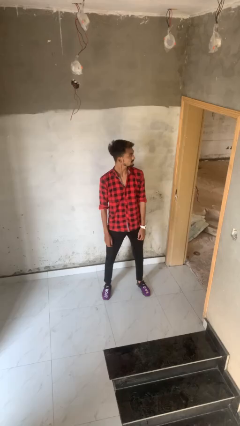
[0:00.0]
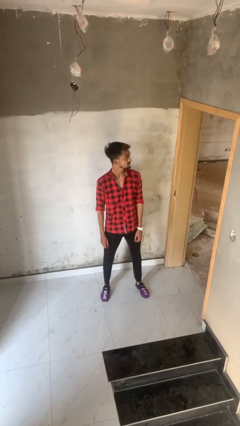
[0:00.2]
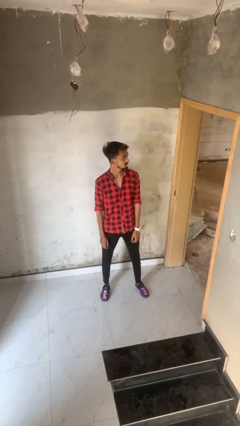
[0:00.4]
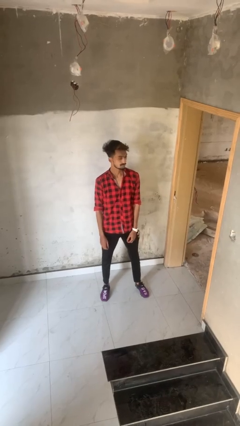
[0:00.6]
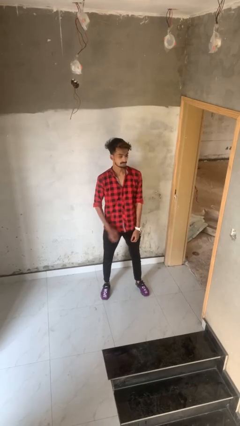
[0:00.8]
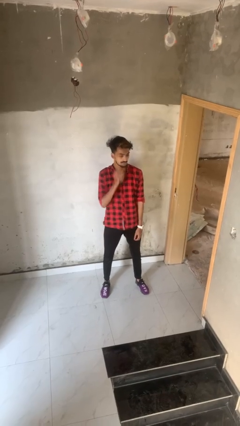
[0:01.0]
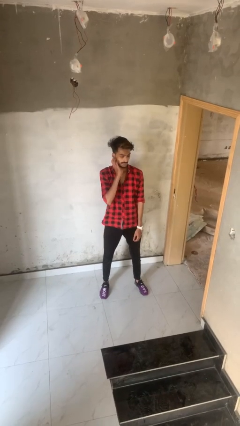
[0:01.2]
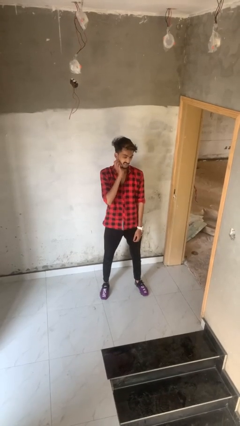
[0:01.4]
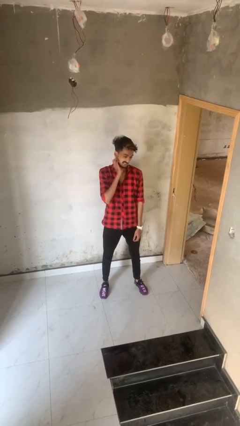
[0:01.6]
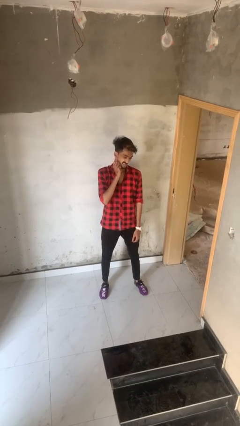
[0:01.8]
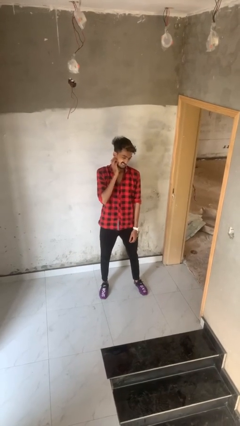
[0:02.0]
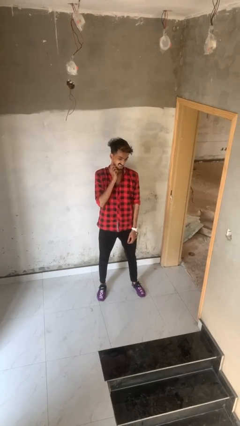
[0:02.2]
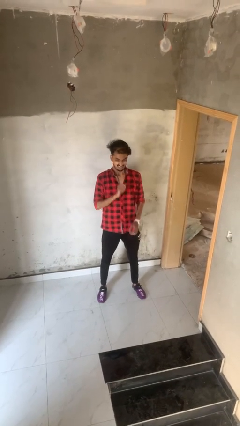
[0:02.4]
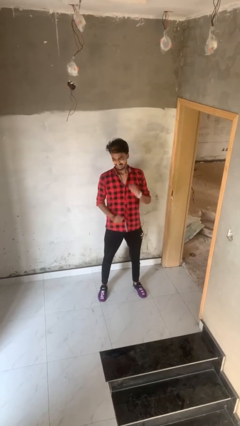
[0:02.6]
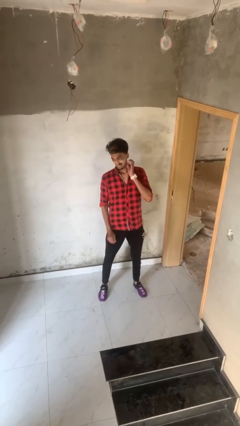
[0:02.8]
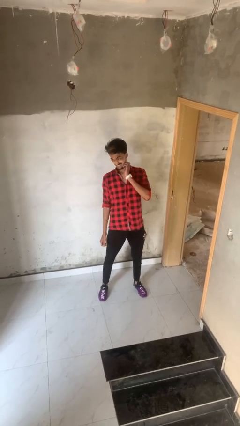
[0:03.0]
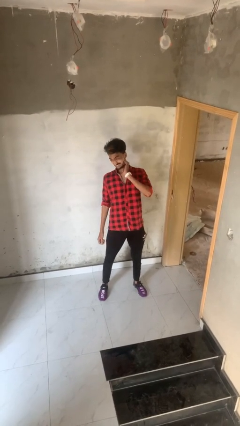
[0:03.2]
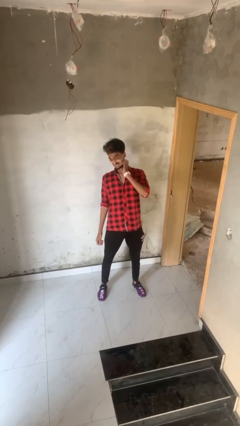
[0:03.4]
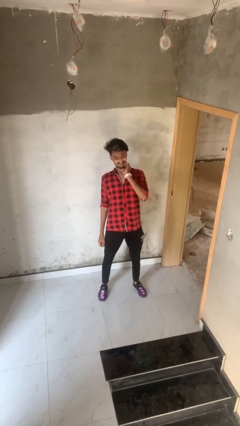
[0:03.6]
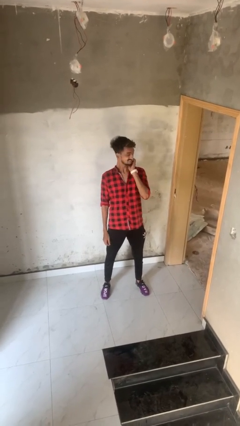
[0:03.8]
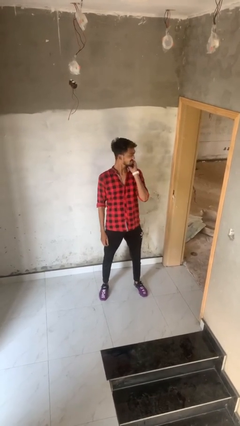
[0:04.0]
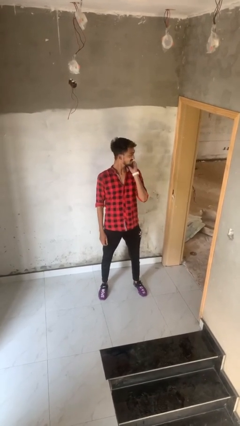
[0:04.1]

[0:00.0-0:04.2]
person scratches face

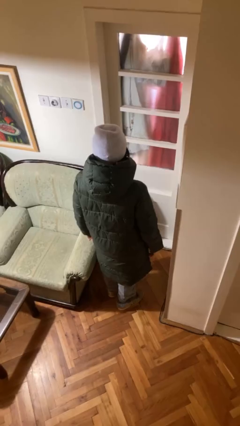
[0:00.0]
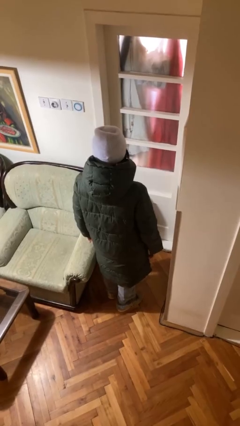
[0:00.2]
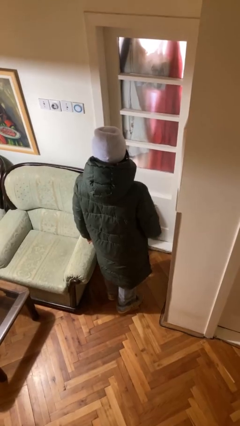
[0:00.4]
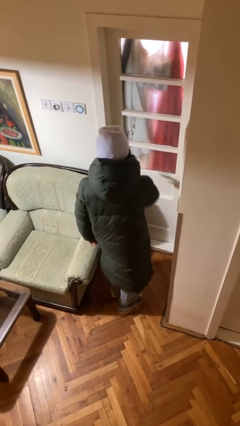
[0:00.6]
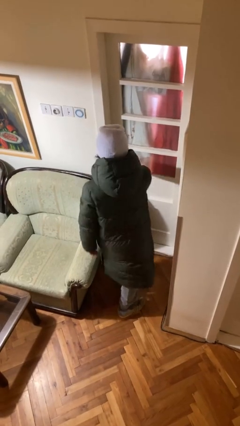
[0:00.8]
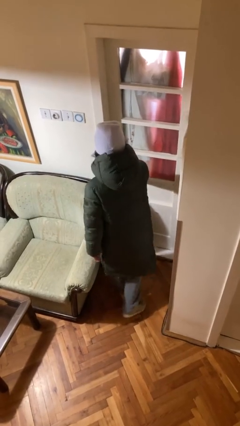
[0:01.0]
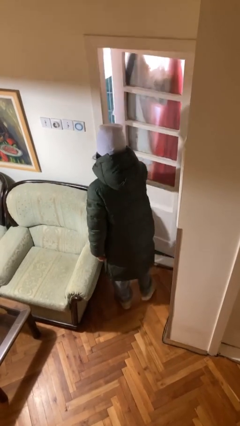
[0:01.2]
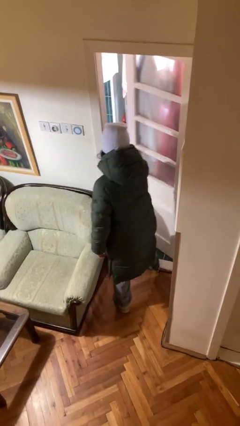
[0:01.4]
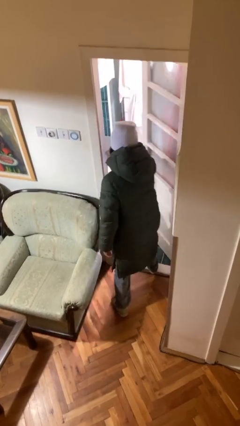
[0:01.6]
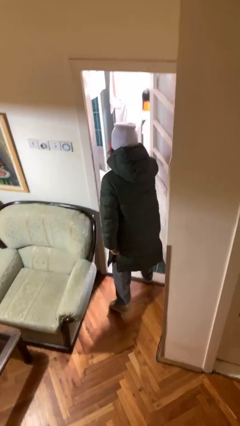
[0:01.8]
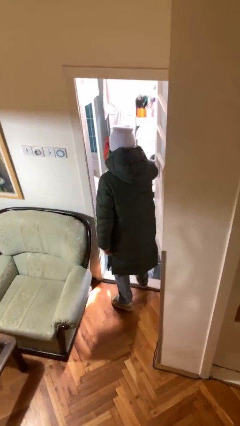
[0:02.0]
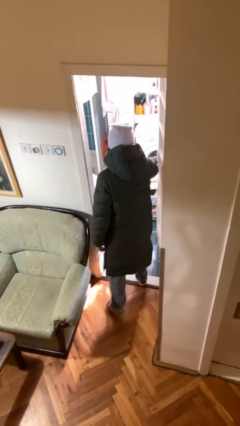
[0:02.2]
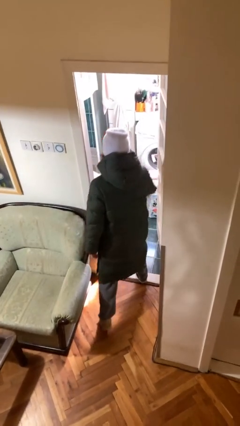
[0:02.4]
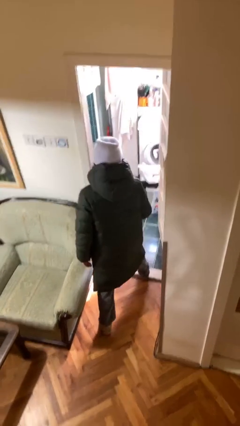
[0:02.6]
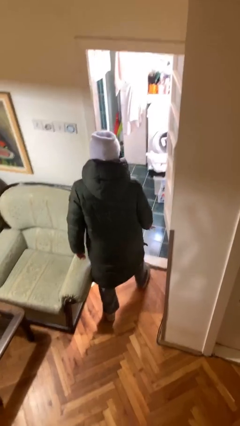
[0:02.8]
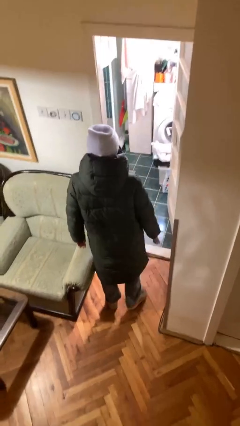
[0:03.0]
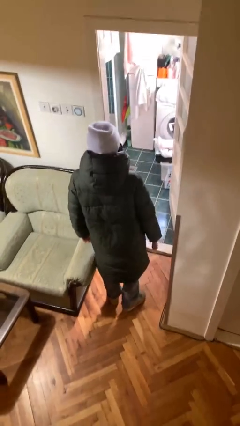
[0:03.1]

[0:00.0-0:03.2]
person opens facility door

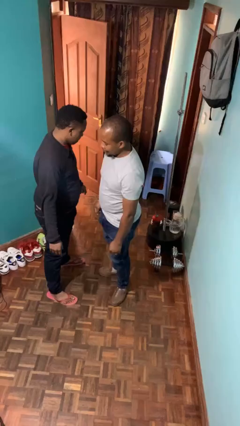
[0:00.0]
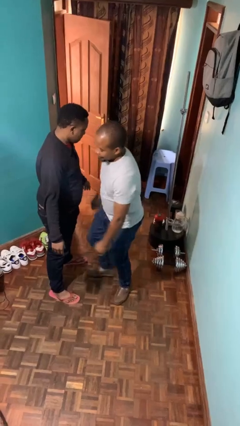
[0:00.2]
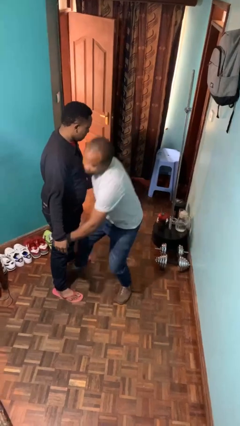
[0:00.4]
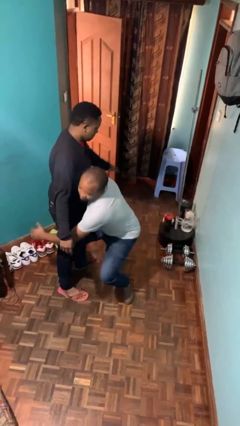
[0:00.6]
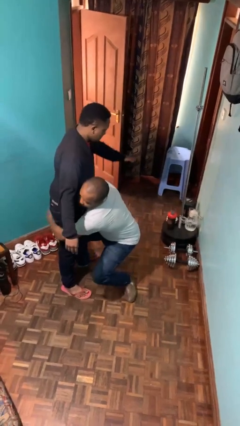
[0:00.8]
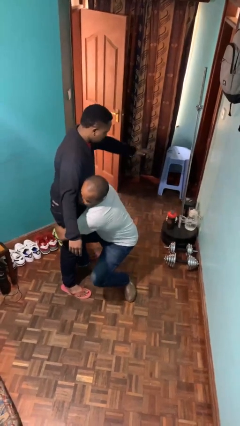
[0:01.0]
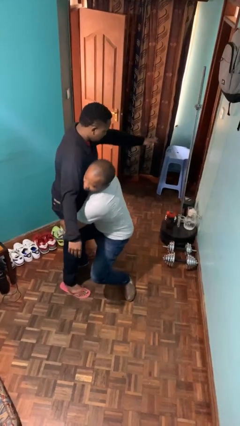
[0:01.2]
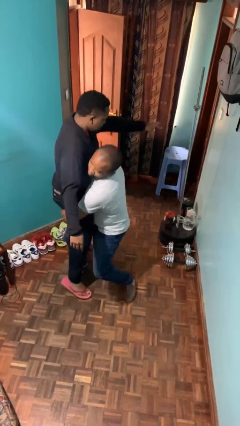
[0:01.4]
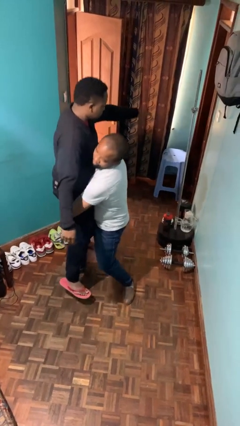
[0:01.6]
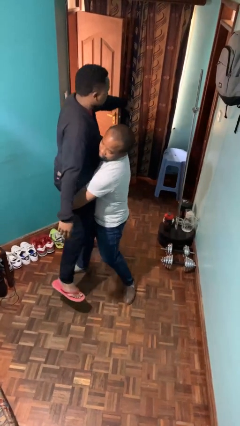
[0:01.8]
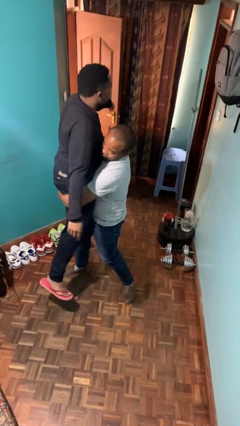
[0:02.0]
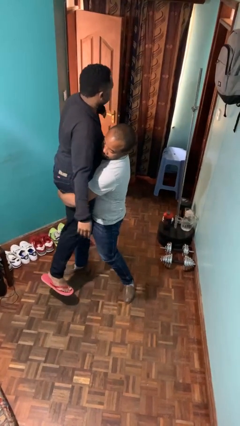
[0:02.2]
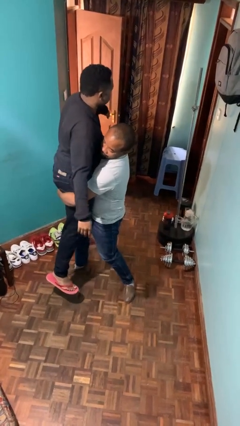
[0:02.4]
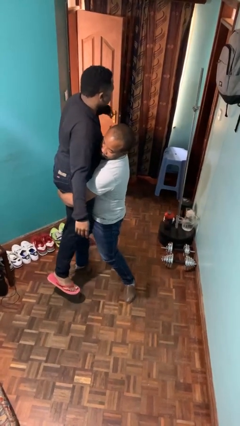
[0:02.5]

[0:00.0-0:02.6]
person picks up person

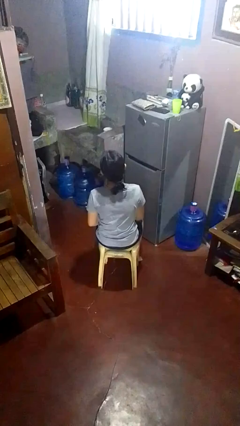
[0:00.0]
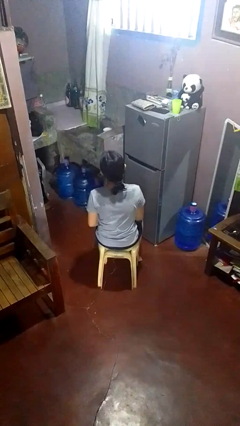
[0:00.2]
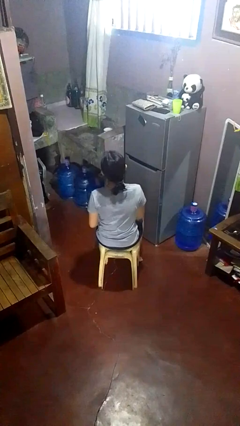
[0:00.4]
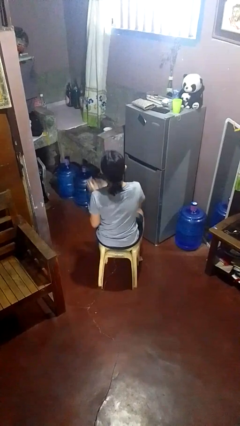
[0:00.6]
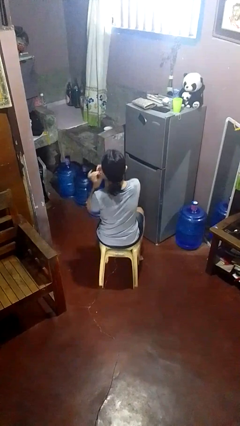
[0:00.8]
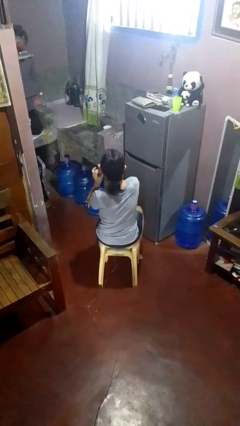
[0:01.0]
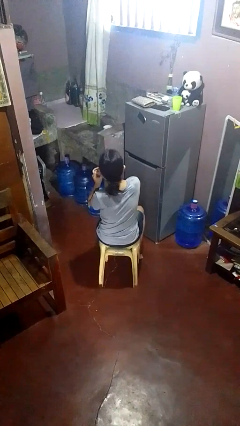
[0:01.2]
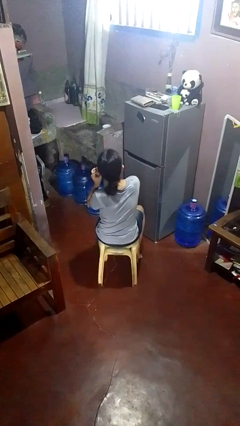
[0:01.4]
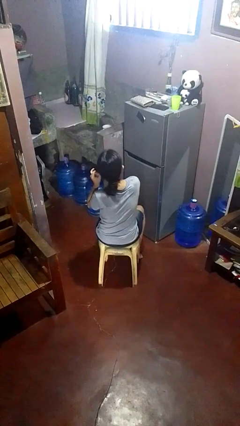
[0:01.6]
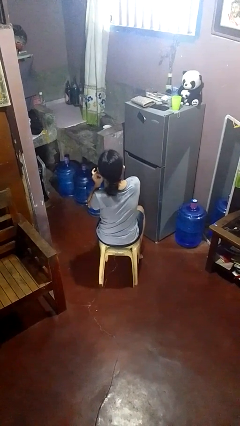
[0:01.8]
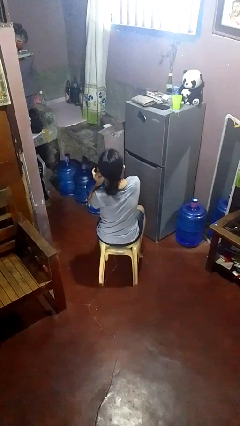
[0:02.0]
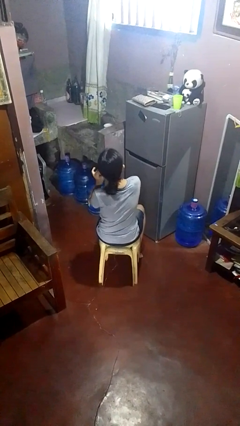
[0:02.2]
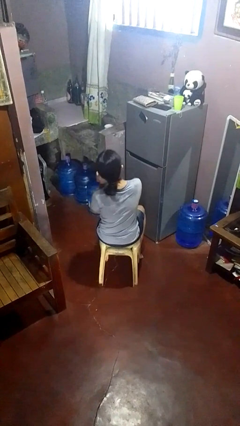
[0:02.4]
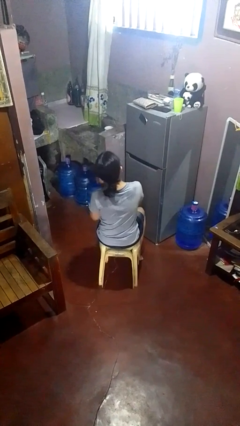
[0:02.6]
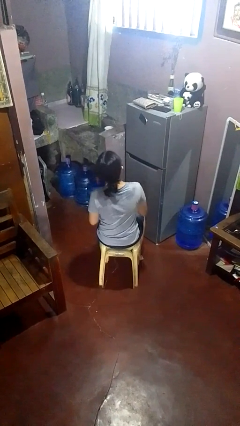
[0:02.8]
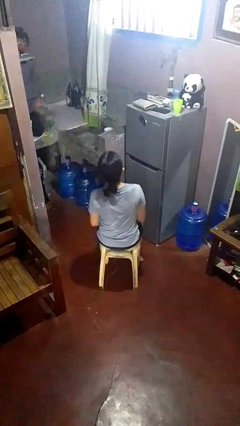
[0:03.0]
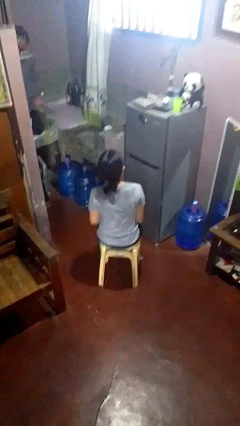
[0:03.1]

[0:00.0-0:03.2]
person takes off earrings

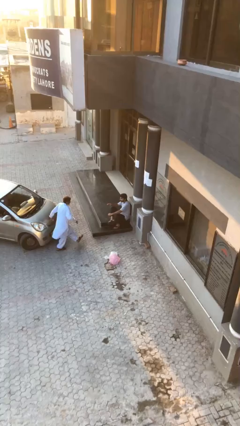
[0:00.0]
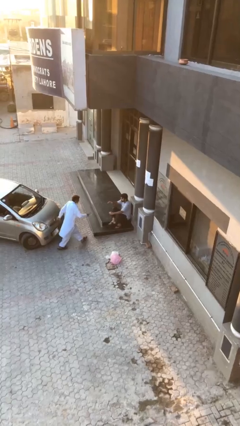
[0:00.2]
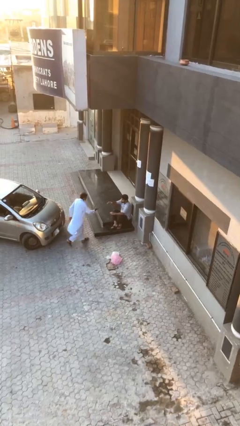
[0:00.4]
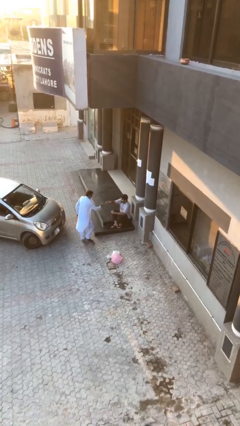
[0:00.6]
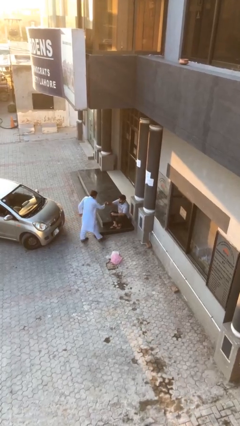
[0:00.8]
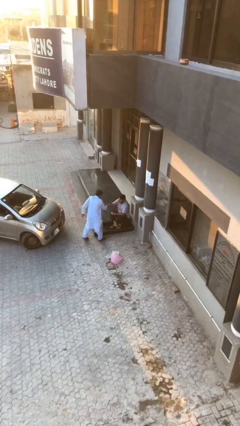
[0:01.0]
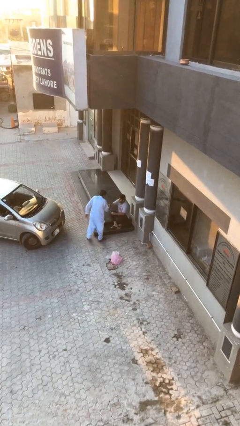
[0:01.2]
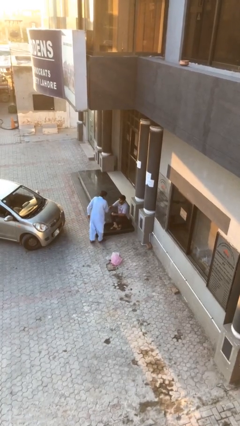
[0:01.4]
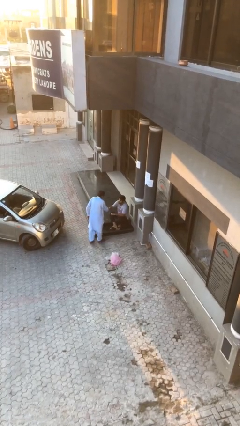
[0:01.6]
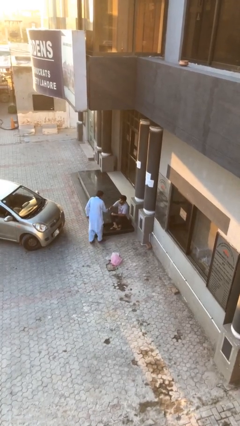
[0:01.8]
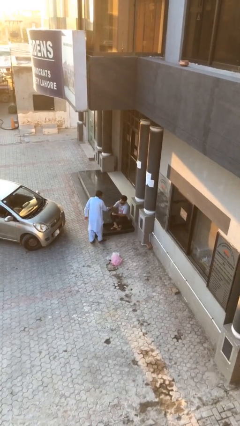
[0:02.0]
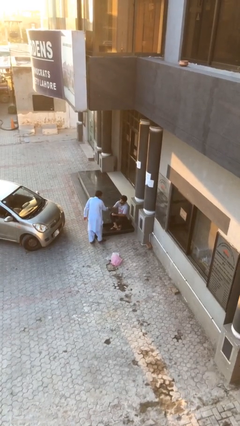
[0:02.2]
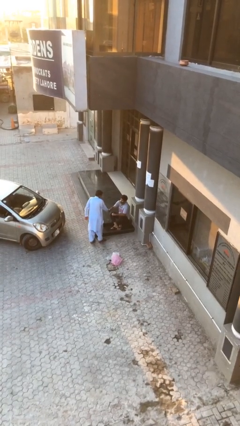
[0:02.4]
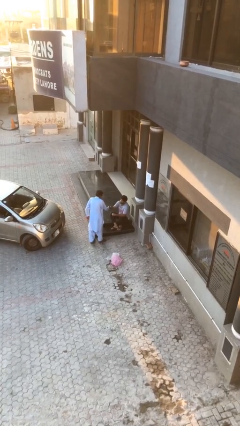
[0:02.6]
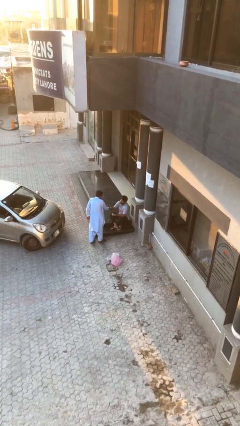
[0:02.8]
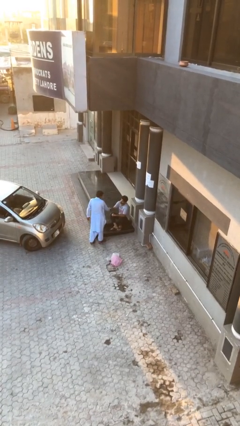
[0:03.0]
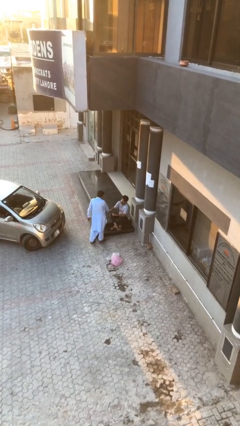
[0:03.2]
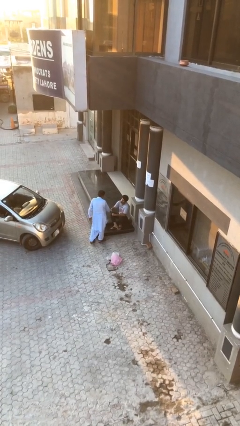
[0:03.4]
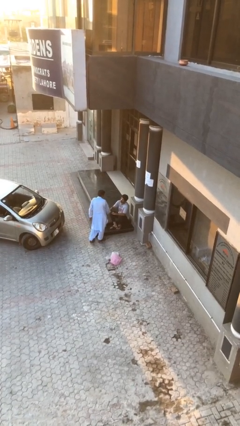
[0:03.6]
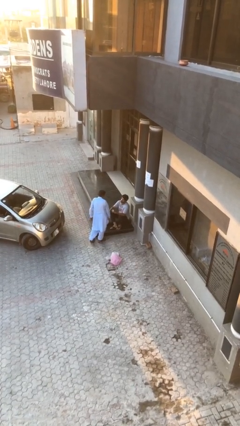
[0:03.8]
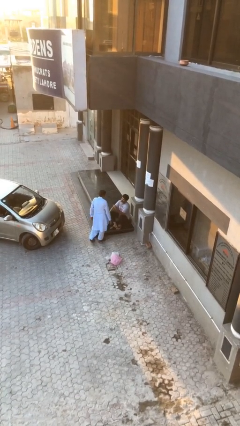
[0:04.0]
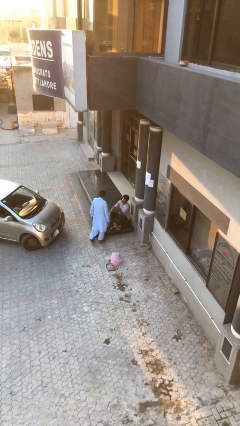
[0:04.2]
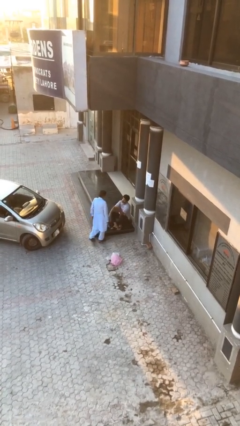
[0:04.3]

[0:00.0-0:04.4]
person shakes hand
